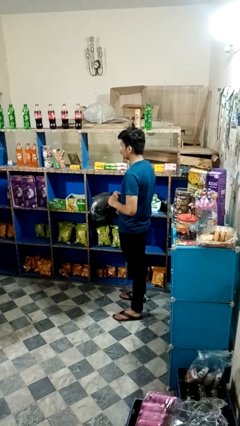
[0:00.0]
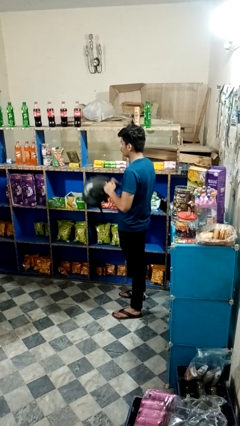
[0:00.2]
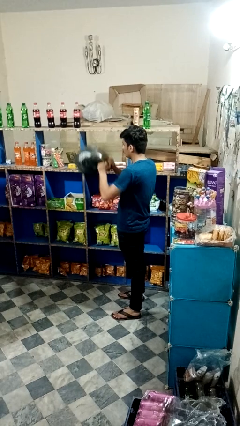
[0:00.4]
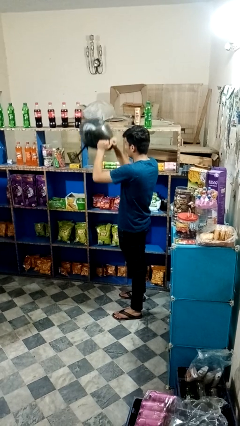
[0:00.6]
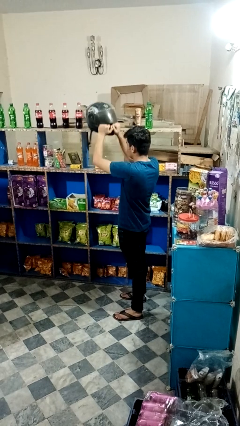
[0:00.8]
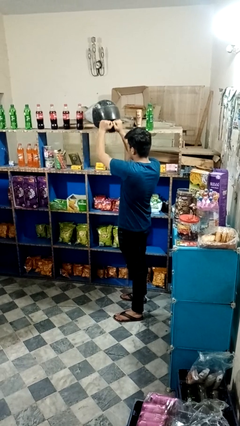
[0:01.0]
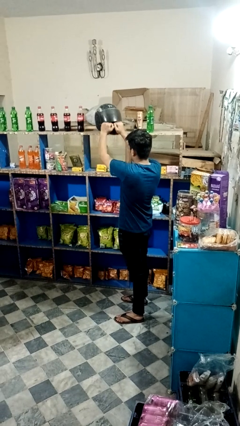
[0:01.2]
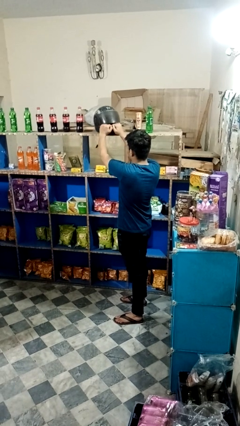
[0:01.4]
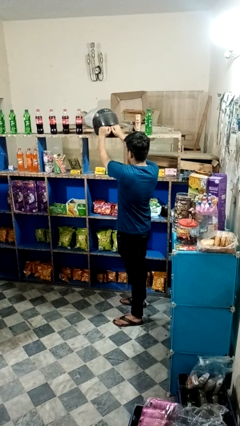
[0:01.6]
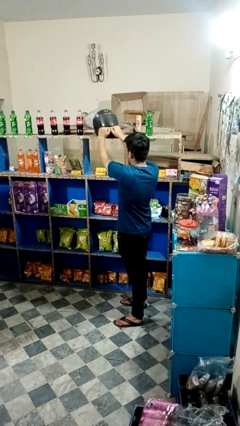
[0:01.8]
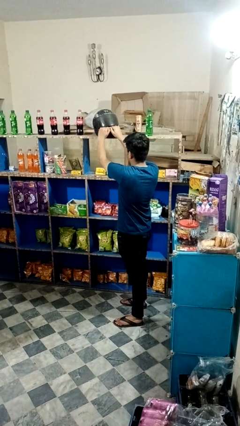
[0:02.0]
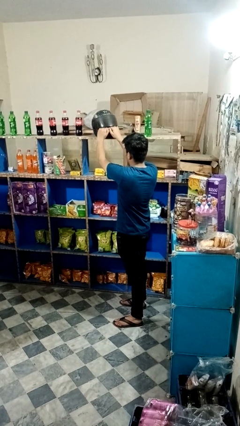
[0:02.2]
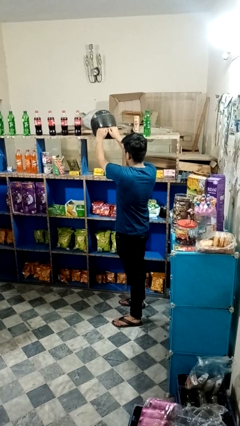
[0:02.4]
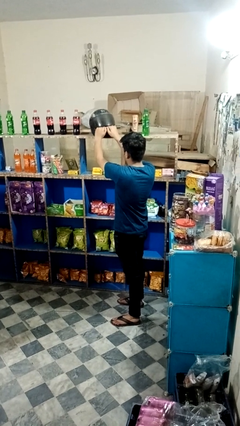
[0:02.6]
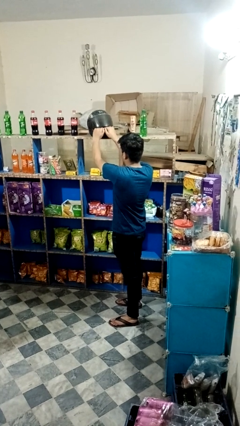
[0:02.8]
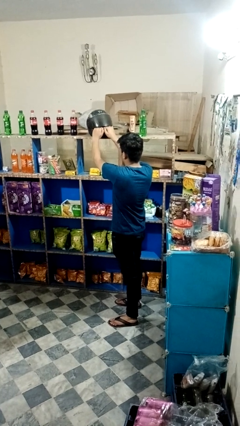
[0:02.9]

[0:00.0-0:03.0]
person picks up object from shelf

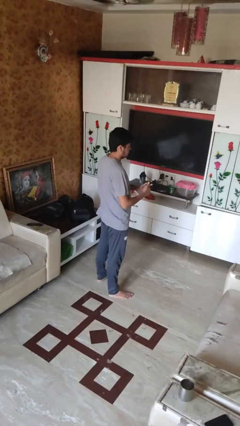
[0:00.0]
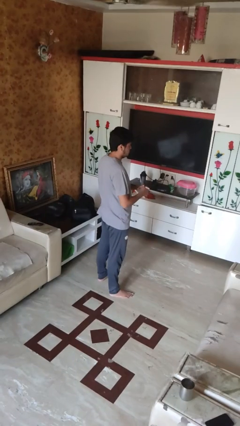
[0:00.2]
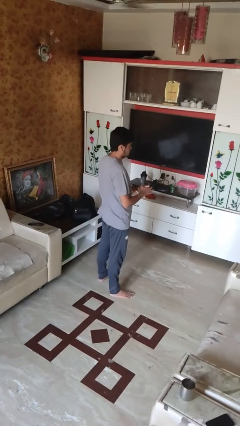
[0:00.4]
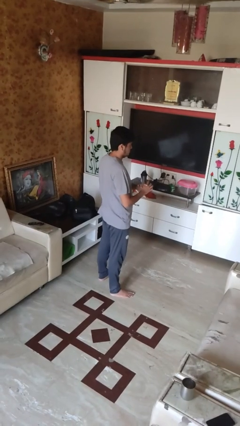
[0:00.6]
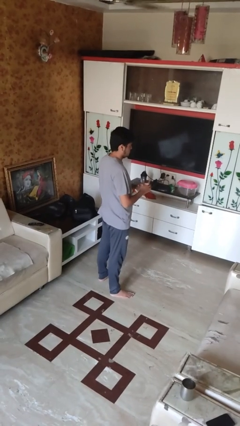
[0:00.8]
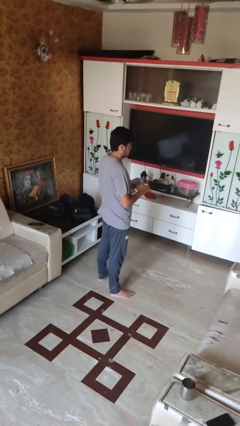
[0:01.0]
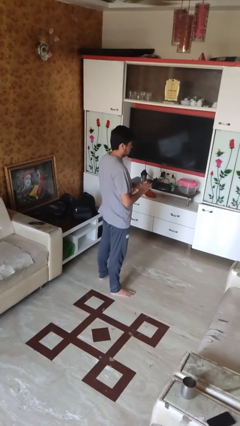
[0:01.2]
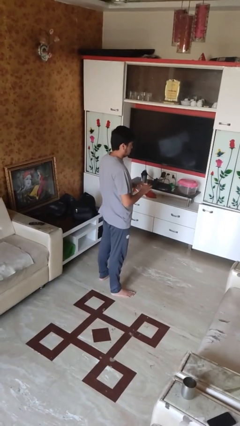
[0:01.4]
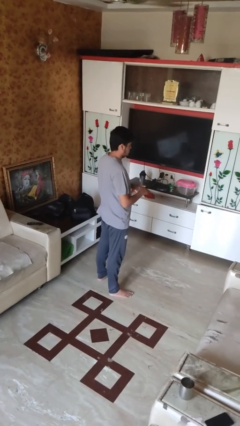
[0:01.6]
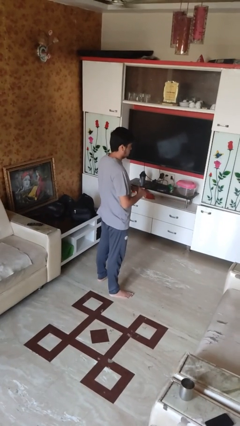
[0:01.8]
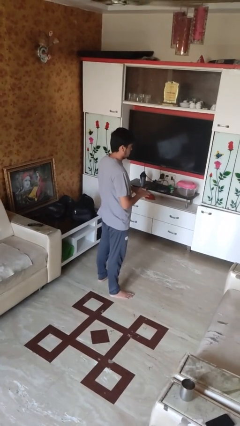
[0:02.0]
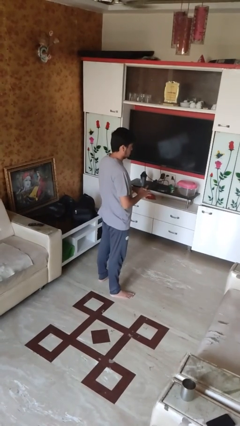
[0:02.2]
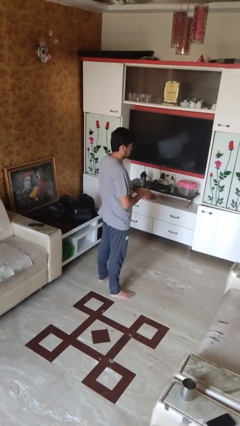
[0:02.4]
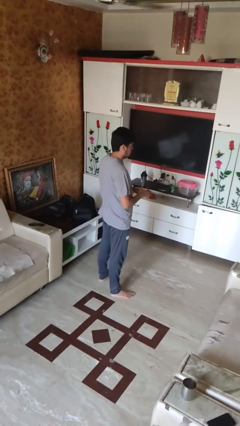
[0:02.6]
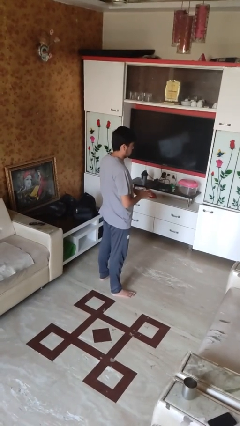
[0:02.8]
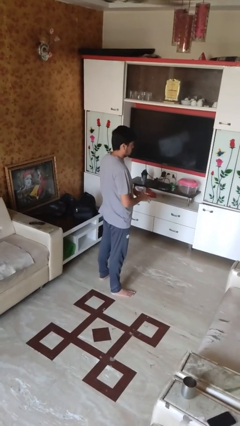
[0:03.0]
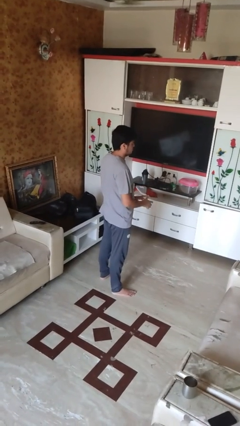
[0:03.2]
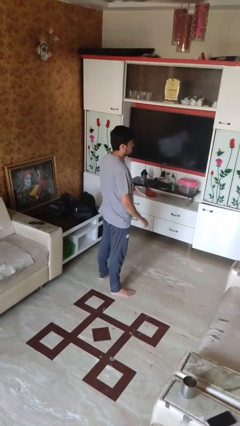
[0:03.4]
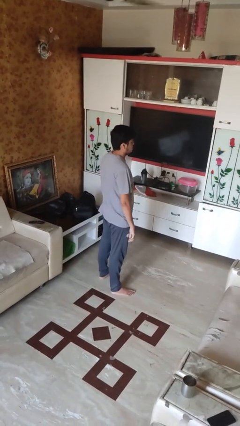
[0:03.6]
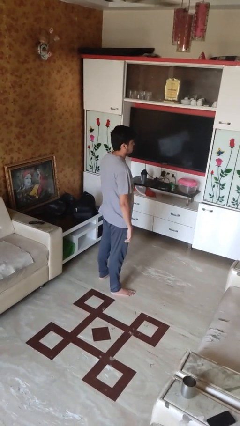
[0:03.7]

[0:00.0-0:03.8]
person cracks knuckles

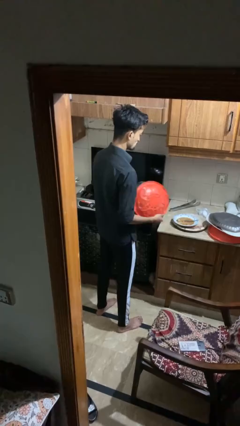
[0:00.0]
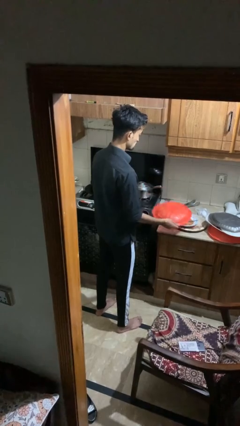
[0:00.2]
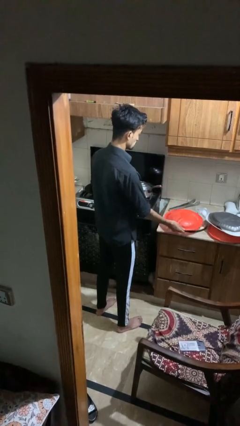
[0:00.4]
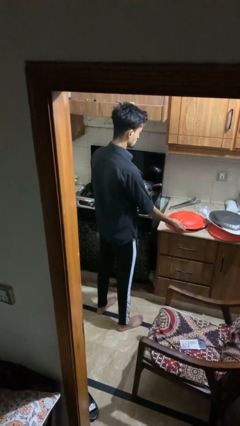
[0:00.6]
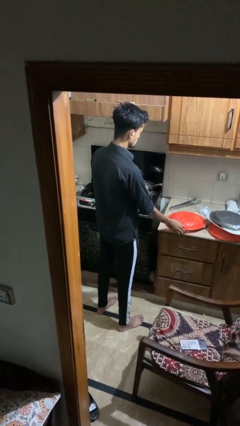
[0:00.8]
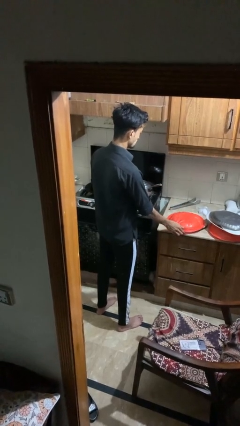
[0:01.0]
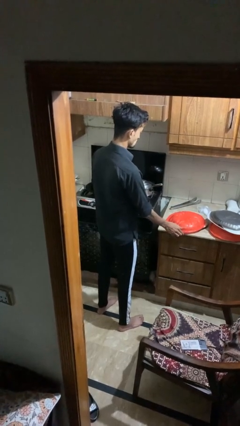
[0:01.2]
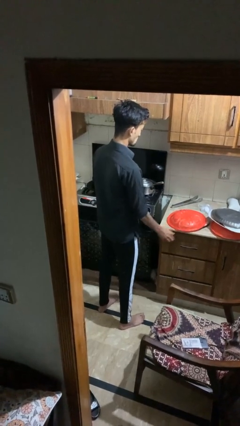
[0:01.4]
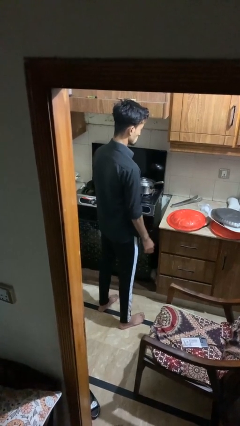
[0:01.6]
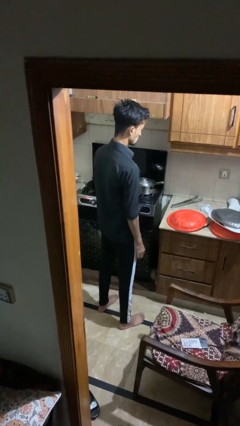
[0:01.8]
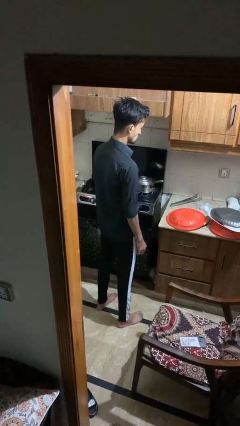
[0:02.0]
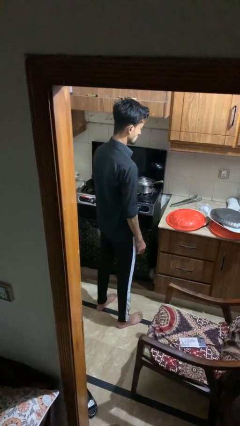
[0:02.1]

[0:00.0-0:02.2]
person puts down object on shelf

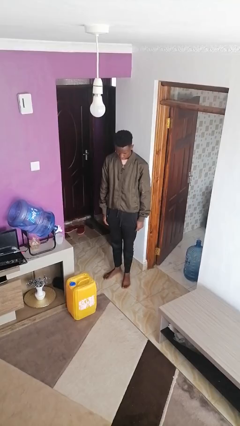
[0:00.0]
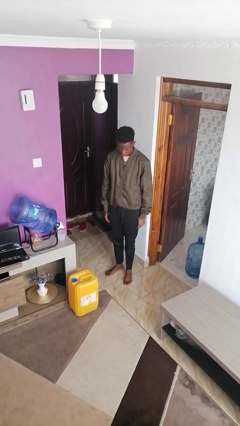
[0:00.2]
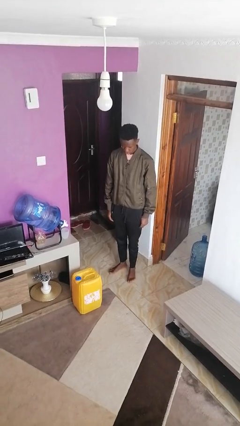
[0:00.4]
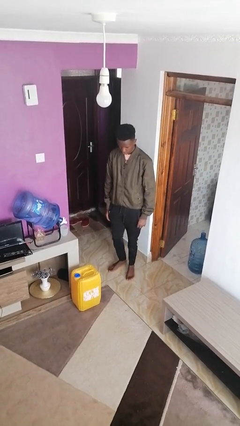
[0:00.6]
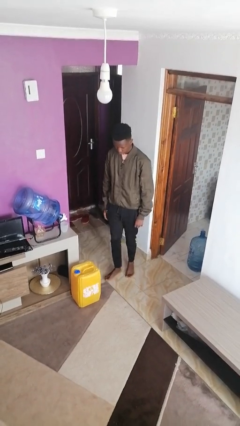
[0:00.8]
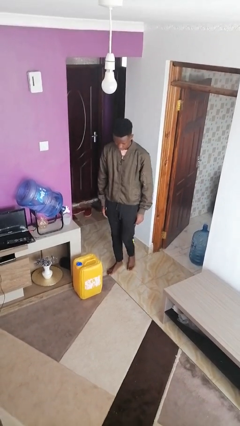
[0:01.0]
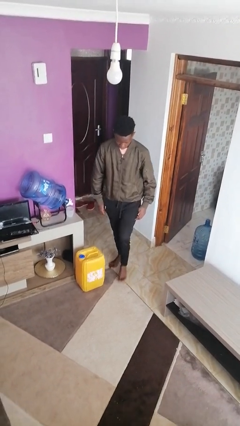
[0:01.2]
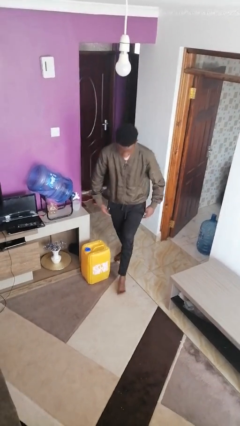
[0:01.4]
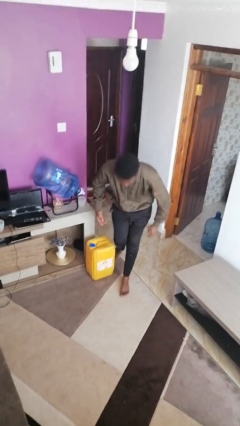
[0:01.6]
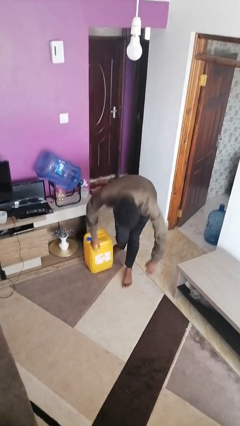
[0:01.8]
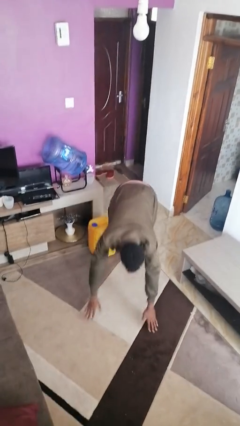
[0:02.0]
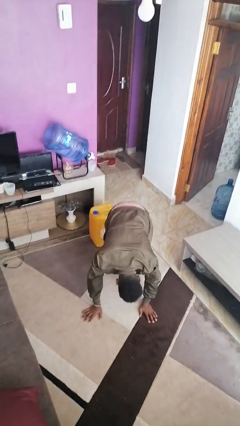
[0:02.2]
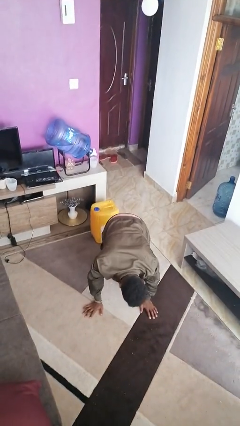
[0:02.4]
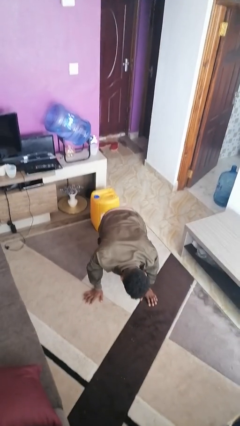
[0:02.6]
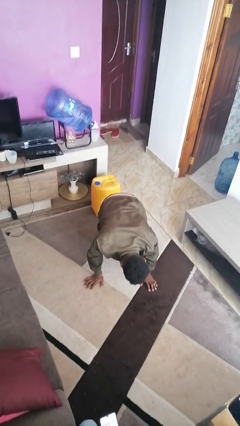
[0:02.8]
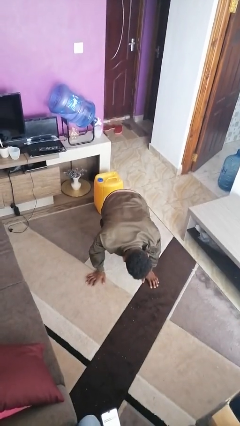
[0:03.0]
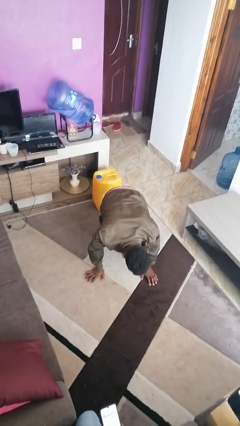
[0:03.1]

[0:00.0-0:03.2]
person trips on object on floor

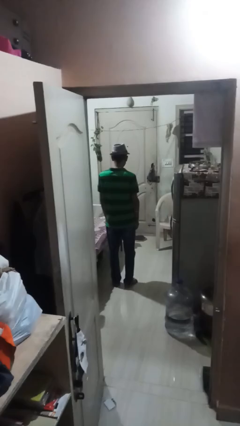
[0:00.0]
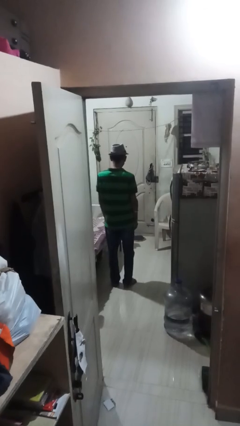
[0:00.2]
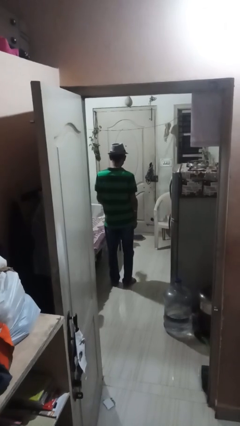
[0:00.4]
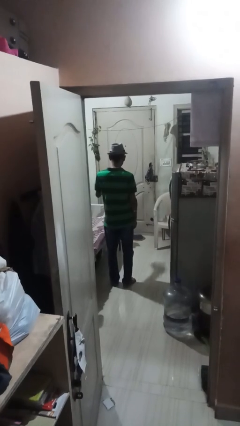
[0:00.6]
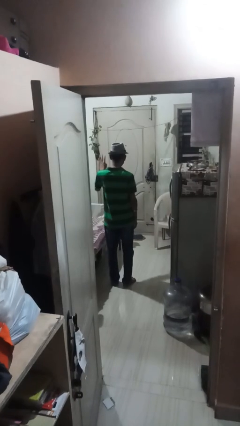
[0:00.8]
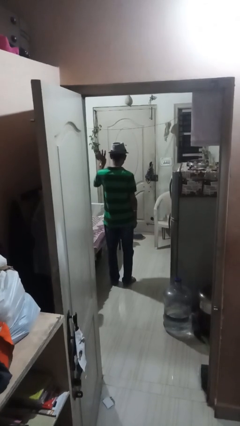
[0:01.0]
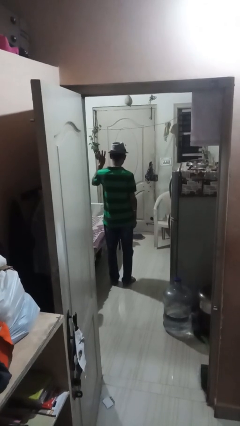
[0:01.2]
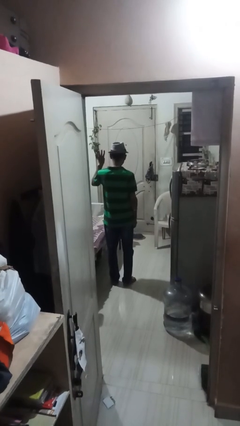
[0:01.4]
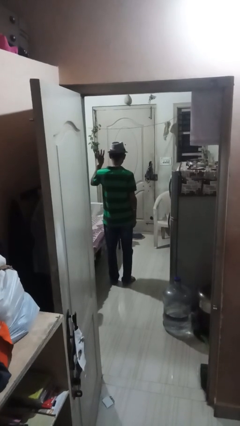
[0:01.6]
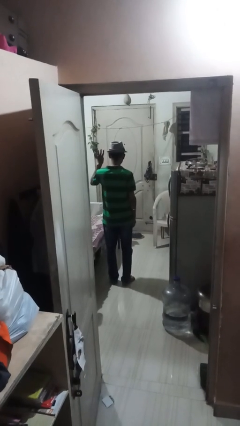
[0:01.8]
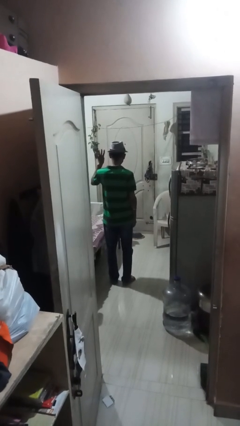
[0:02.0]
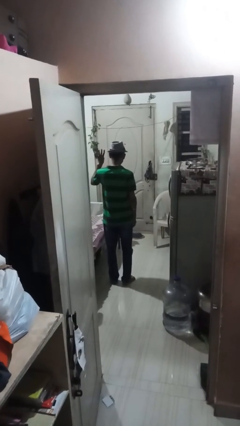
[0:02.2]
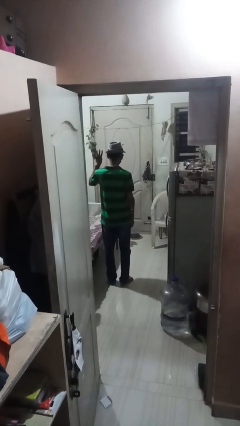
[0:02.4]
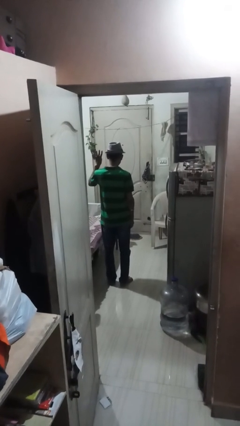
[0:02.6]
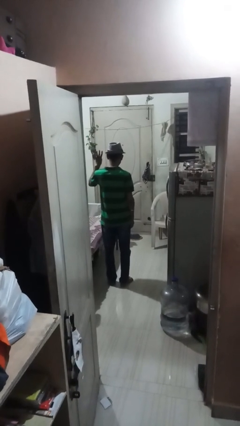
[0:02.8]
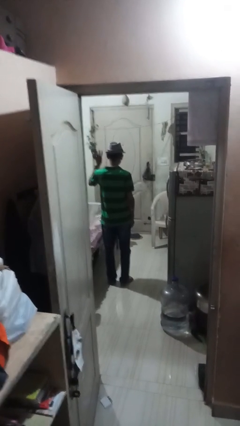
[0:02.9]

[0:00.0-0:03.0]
person gestures number four

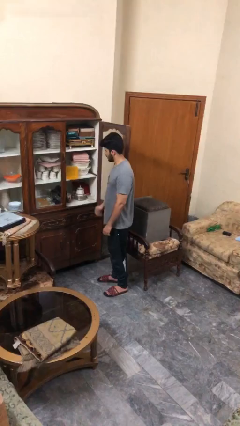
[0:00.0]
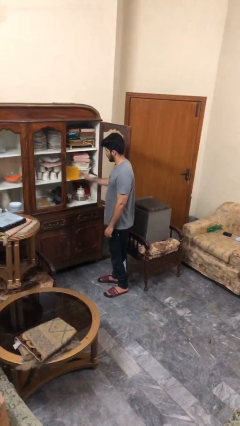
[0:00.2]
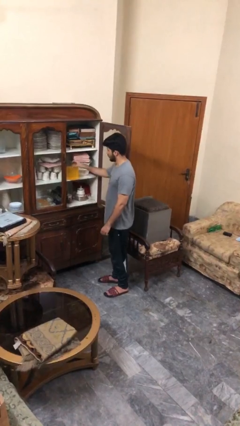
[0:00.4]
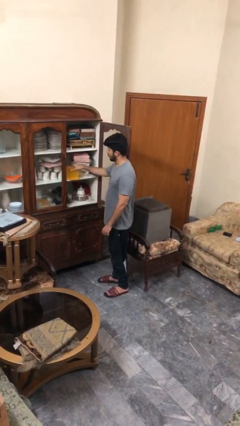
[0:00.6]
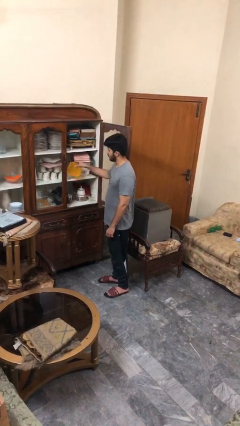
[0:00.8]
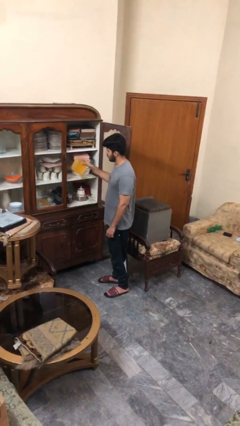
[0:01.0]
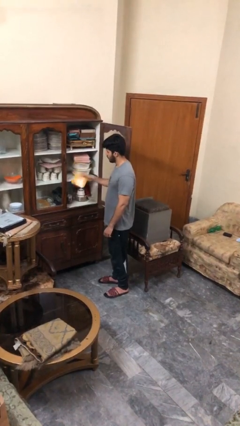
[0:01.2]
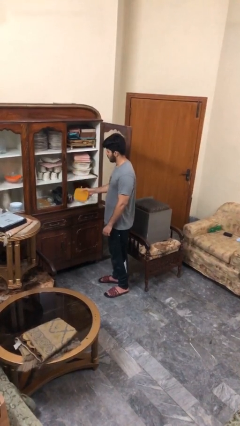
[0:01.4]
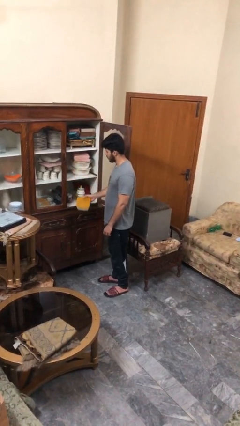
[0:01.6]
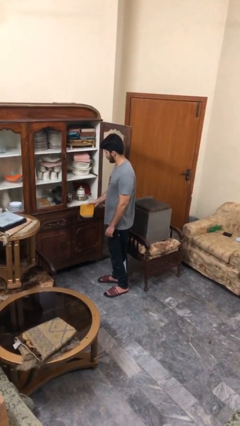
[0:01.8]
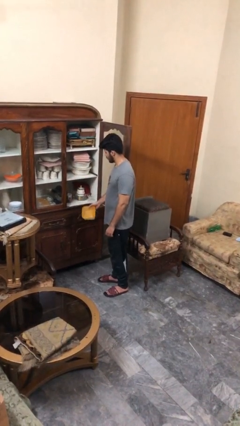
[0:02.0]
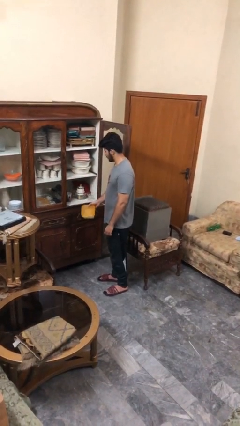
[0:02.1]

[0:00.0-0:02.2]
person picks up object from cabinet
